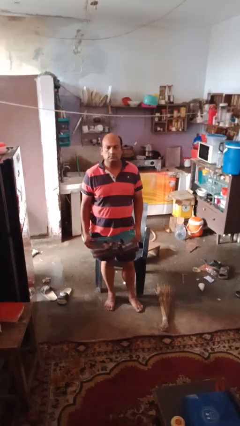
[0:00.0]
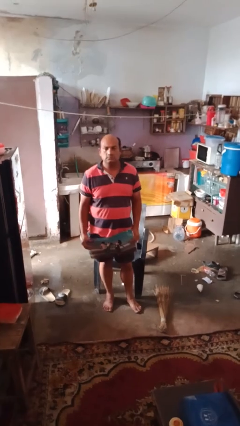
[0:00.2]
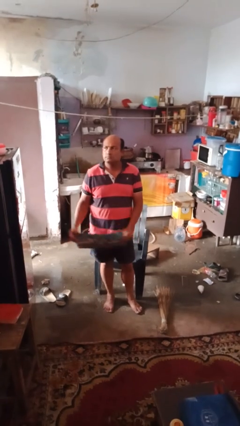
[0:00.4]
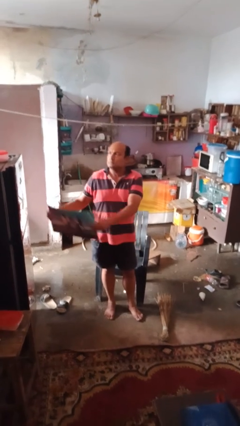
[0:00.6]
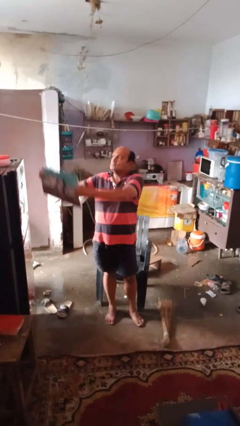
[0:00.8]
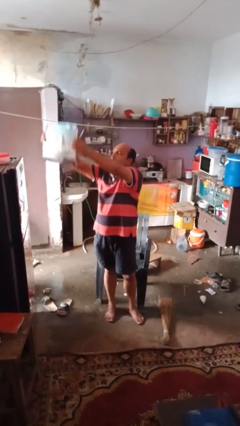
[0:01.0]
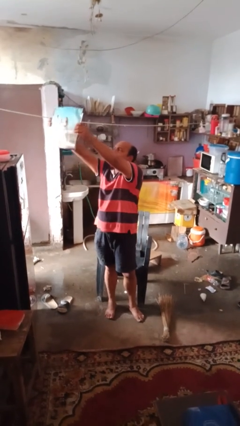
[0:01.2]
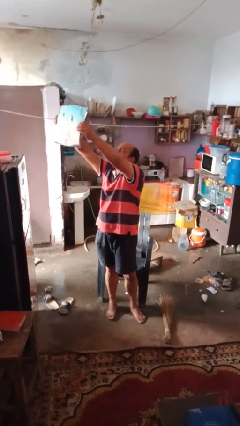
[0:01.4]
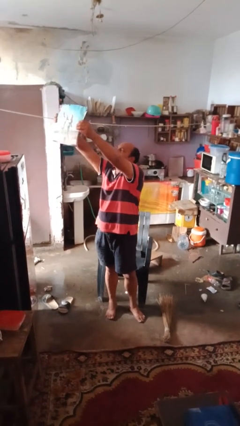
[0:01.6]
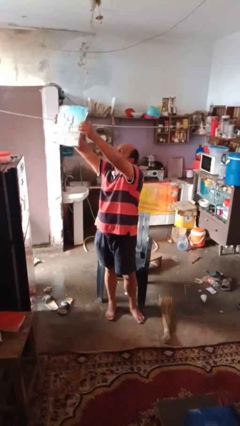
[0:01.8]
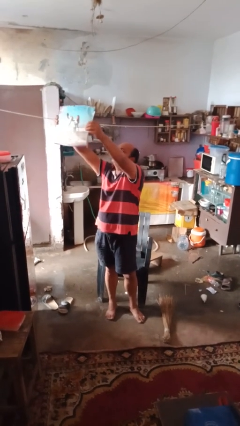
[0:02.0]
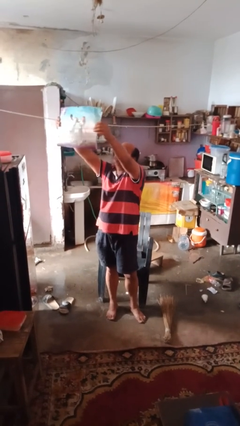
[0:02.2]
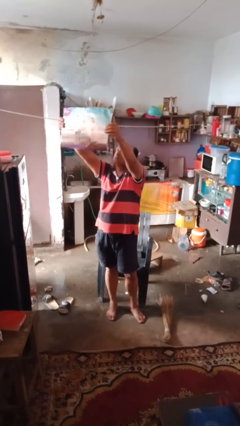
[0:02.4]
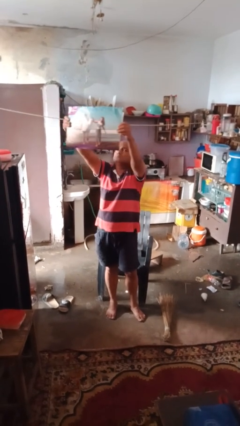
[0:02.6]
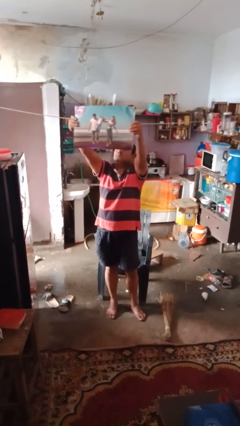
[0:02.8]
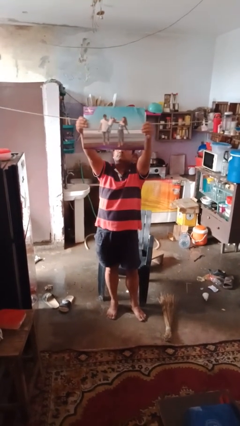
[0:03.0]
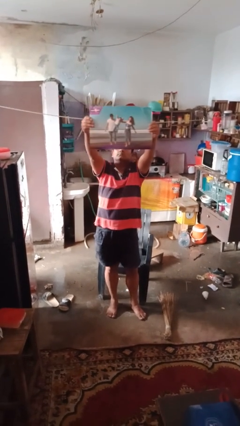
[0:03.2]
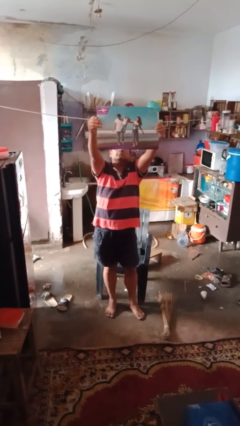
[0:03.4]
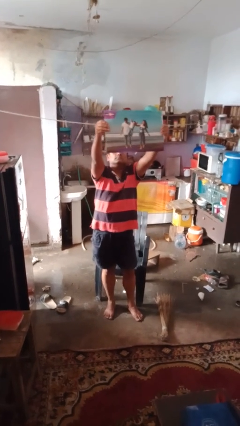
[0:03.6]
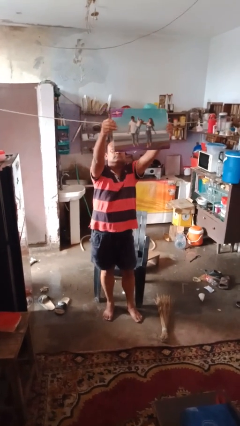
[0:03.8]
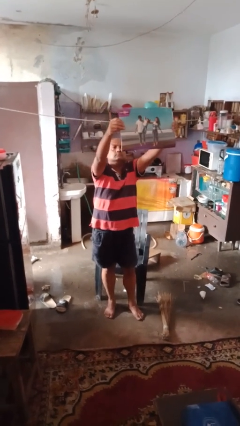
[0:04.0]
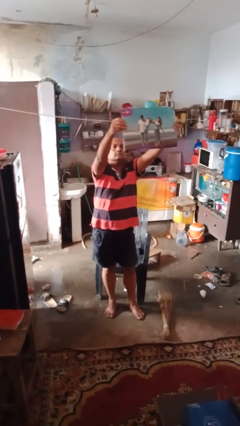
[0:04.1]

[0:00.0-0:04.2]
person holds object above head

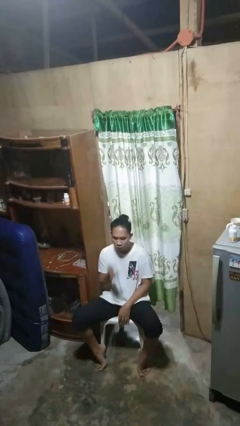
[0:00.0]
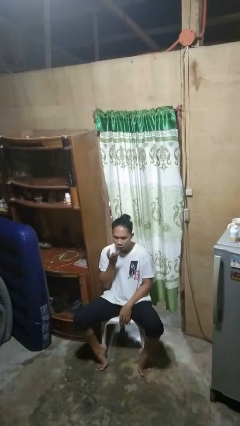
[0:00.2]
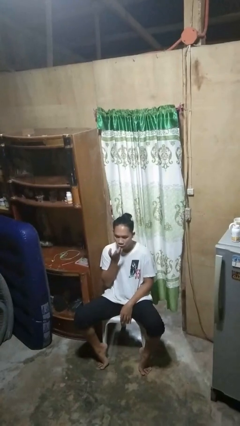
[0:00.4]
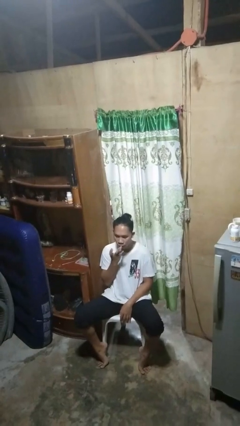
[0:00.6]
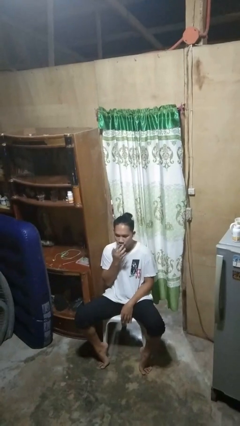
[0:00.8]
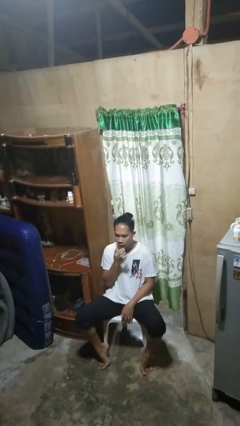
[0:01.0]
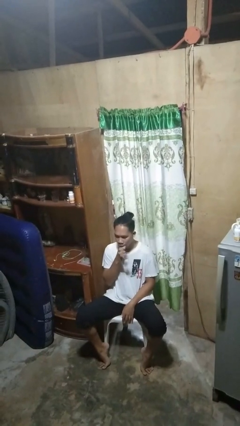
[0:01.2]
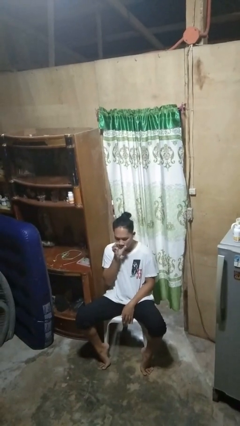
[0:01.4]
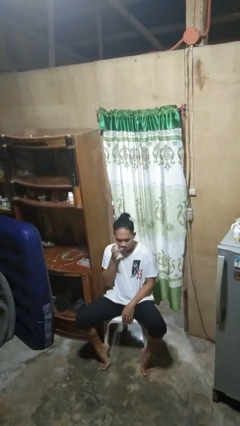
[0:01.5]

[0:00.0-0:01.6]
person licks fingers

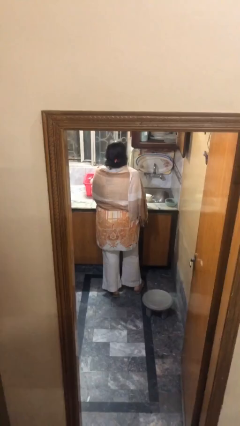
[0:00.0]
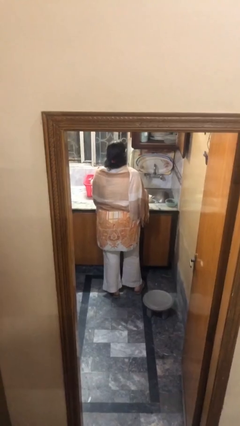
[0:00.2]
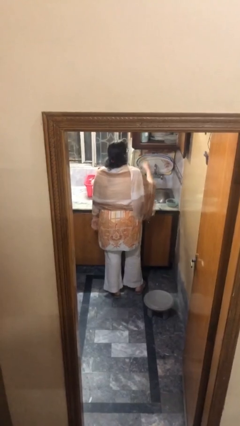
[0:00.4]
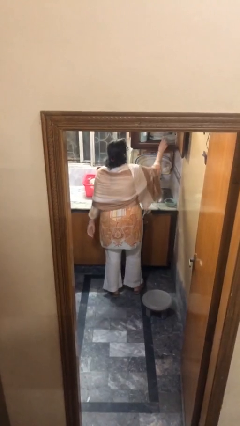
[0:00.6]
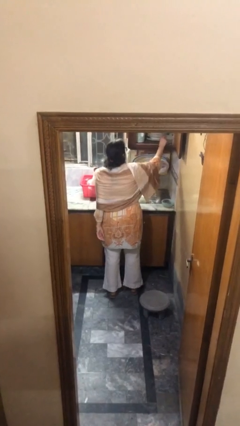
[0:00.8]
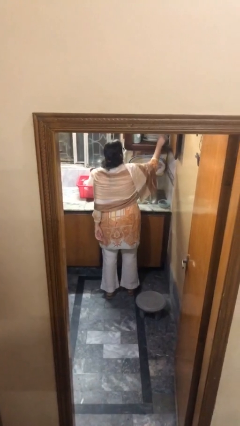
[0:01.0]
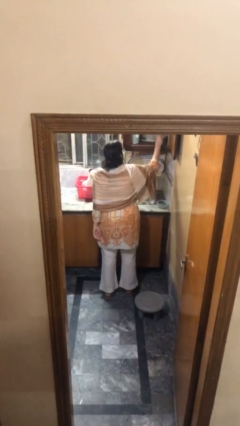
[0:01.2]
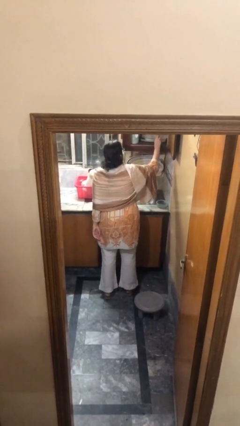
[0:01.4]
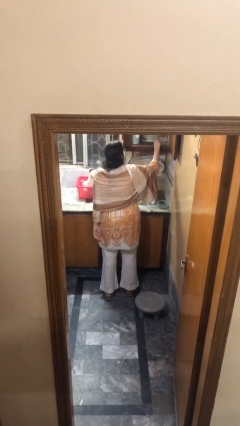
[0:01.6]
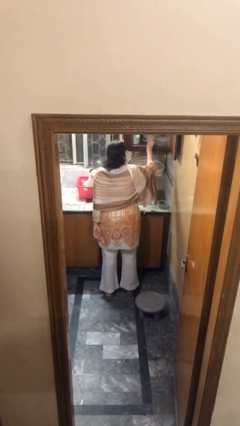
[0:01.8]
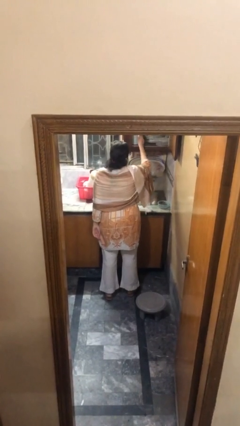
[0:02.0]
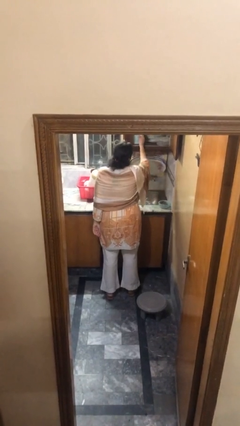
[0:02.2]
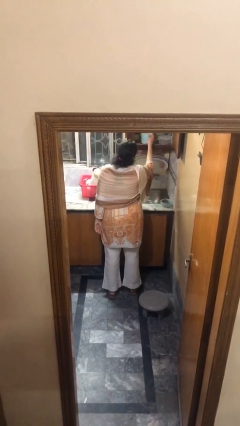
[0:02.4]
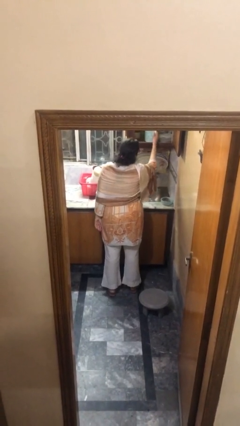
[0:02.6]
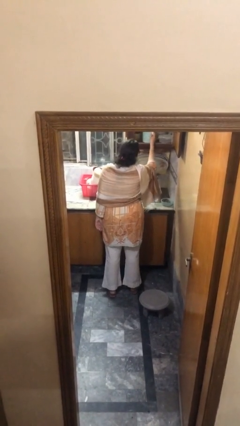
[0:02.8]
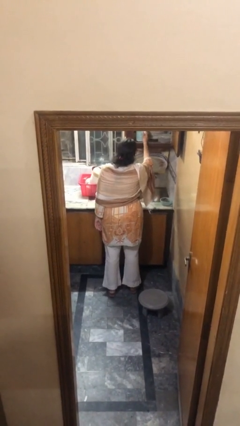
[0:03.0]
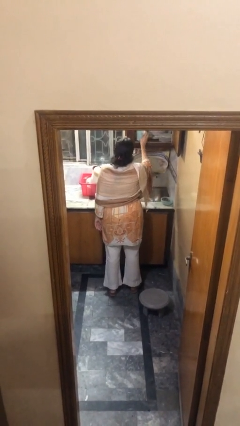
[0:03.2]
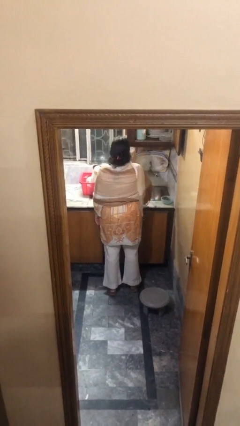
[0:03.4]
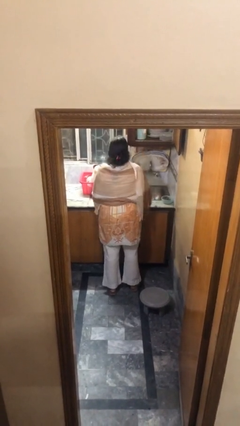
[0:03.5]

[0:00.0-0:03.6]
person searches in kitchen drawer

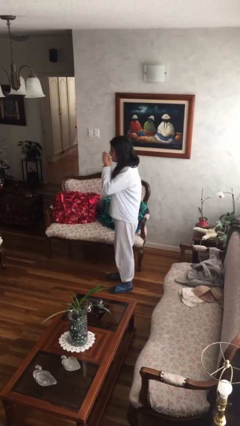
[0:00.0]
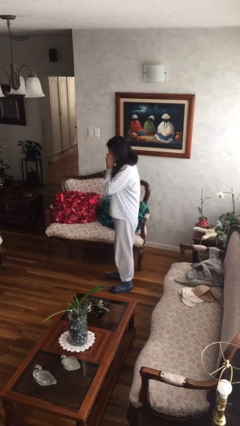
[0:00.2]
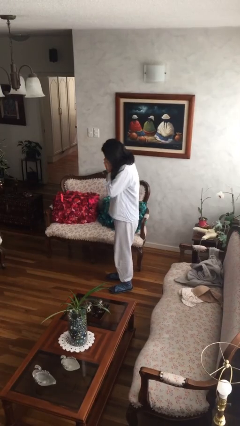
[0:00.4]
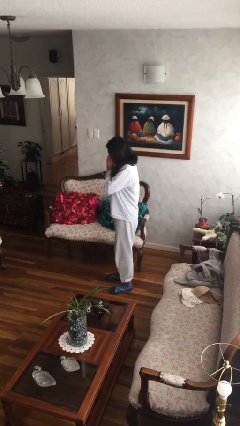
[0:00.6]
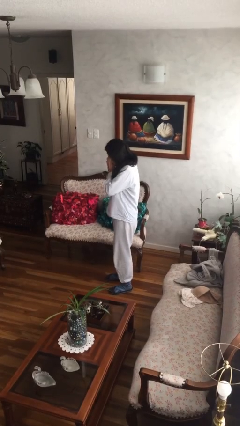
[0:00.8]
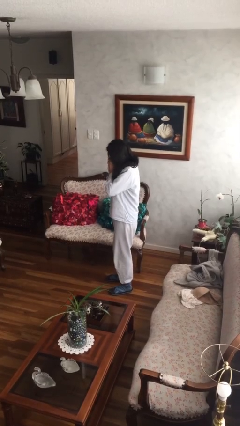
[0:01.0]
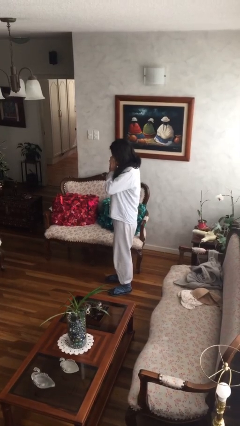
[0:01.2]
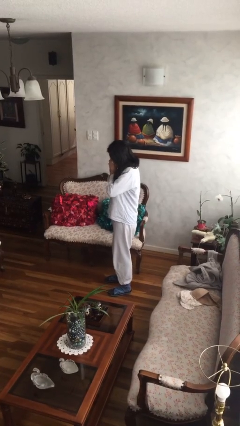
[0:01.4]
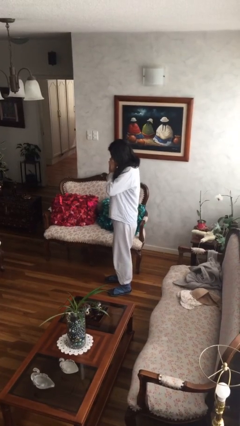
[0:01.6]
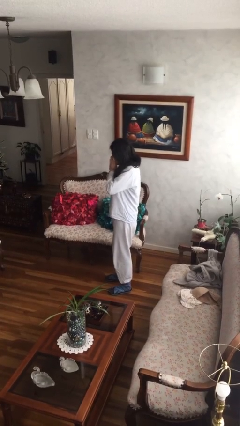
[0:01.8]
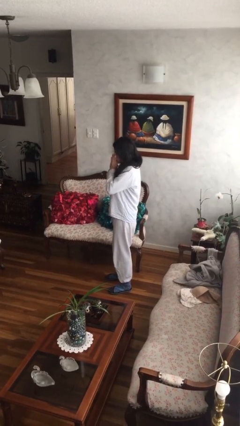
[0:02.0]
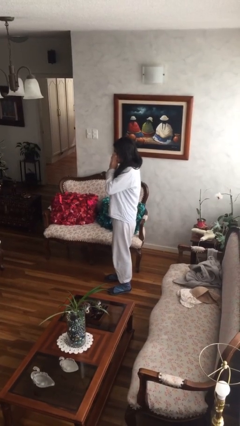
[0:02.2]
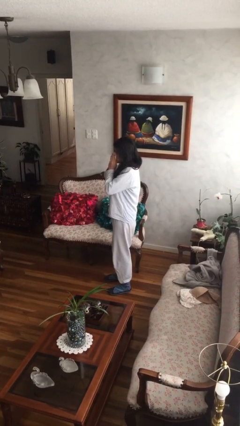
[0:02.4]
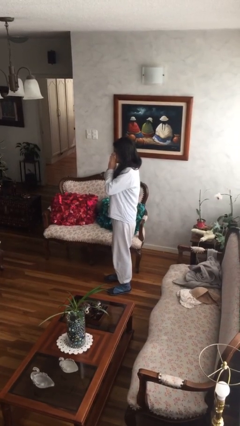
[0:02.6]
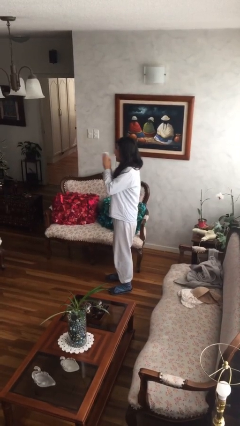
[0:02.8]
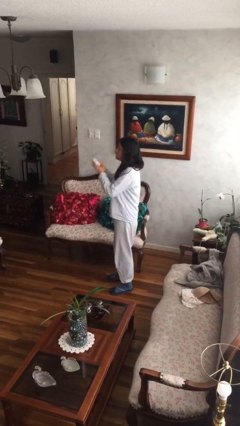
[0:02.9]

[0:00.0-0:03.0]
person blows nose

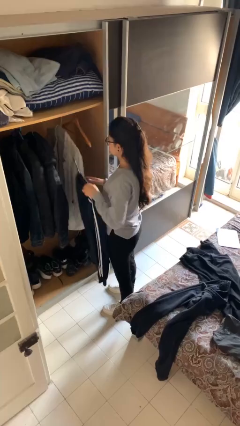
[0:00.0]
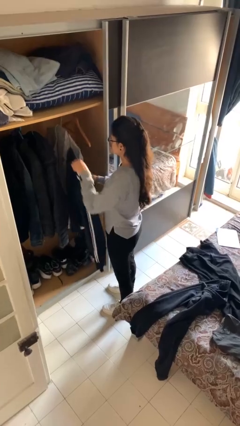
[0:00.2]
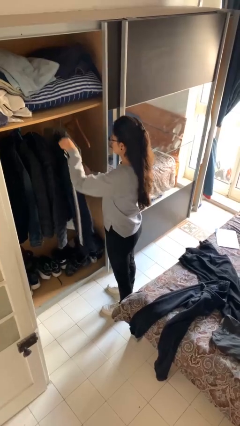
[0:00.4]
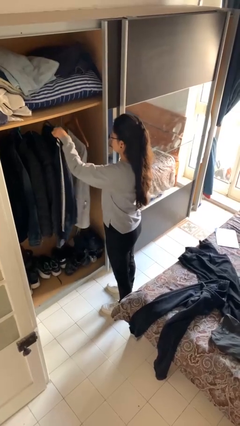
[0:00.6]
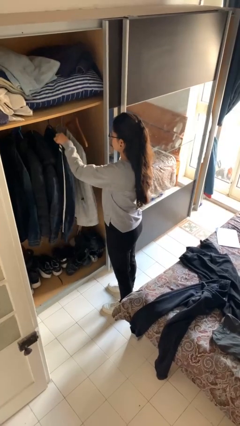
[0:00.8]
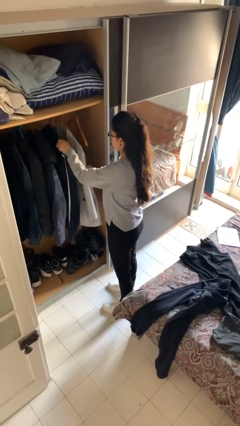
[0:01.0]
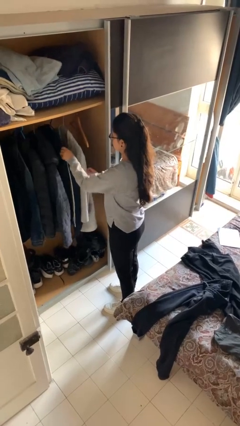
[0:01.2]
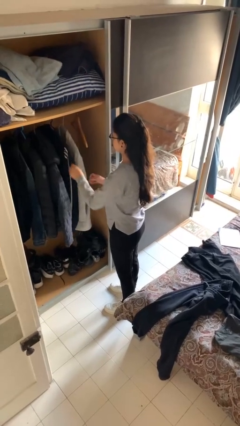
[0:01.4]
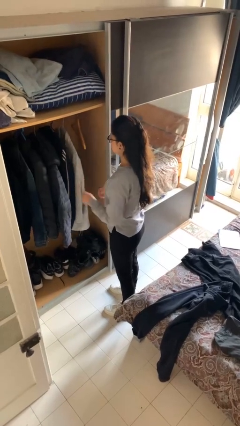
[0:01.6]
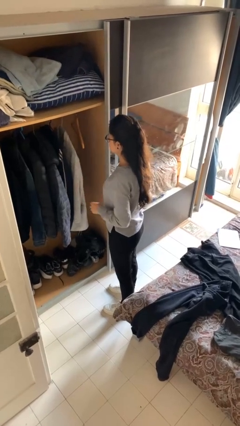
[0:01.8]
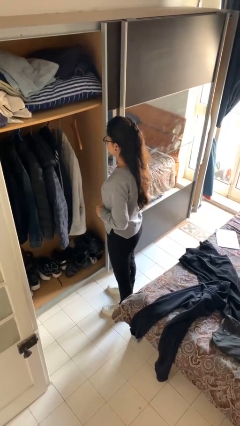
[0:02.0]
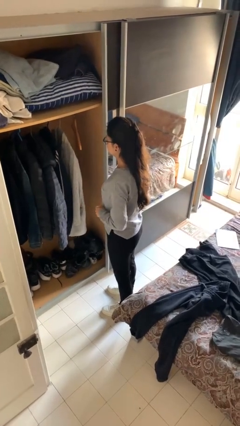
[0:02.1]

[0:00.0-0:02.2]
person puts clothes into closet

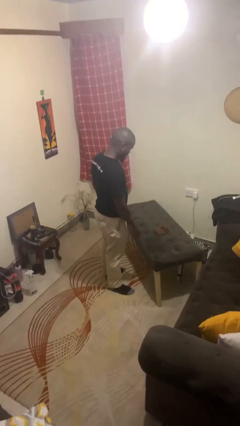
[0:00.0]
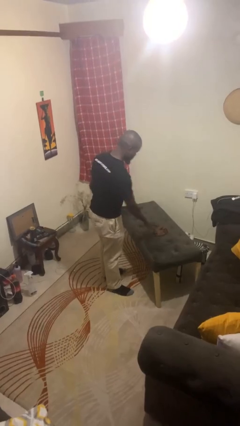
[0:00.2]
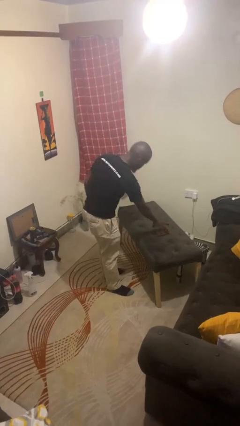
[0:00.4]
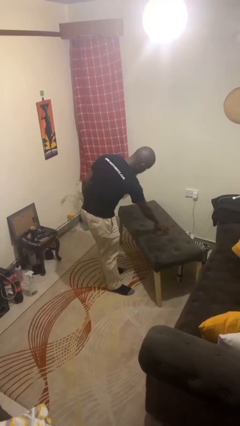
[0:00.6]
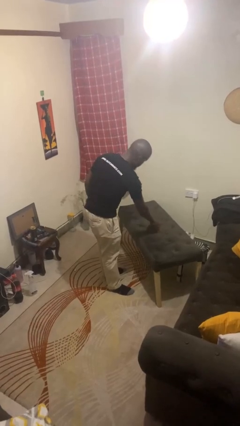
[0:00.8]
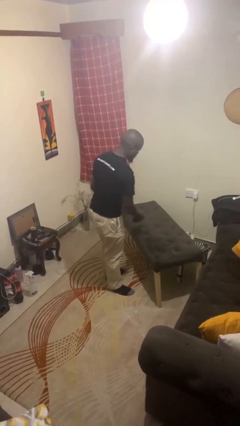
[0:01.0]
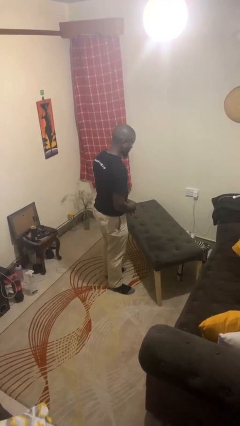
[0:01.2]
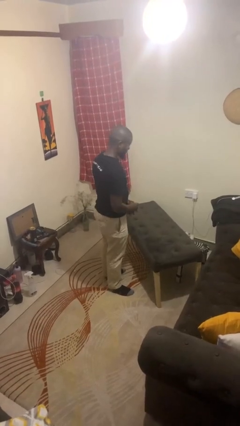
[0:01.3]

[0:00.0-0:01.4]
person picks up object from table

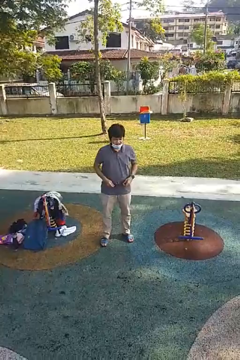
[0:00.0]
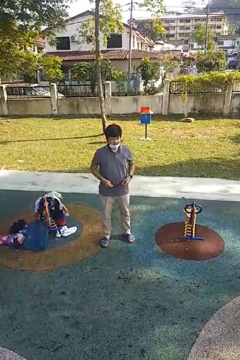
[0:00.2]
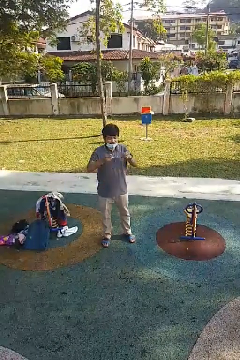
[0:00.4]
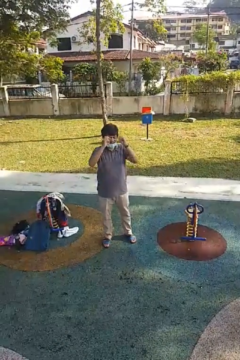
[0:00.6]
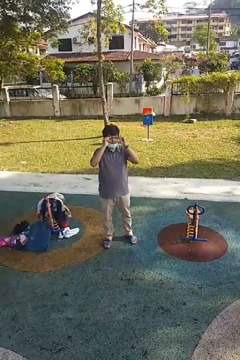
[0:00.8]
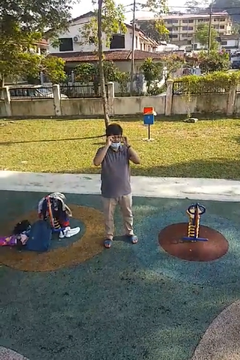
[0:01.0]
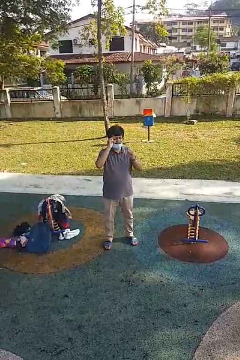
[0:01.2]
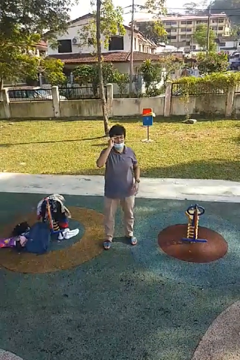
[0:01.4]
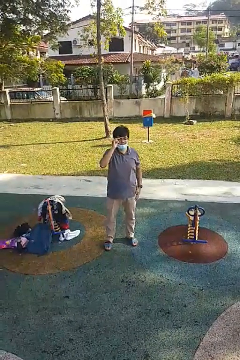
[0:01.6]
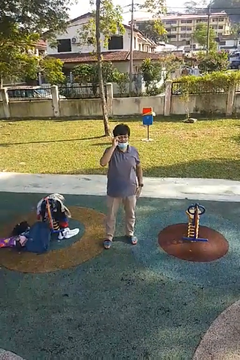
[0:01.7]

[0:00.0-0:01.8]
person puts on glasses
